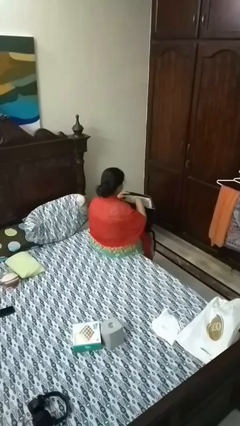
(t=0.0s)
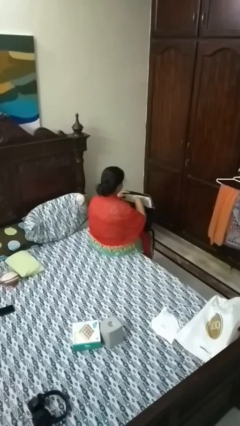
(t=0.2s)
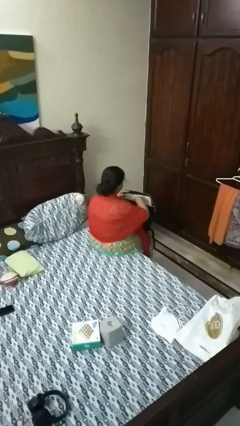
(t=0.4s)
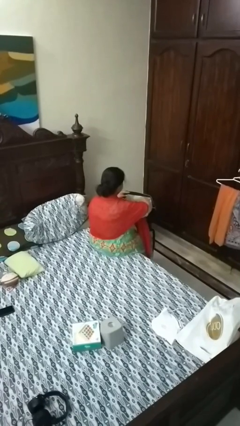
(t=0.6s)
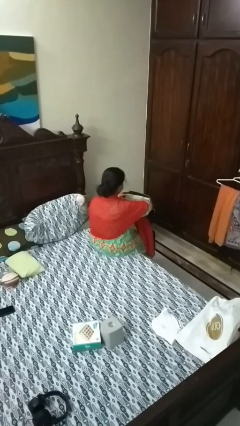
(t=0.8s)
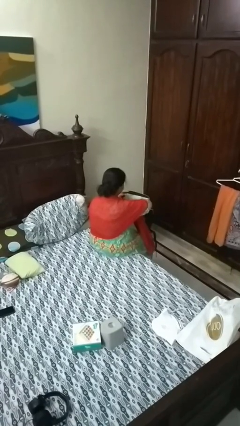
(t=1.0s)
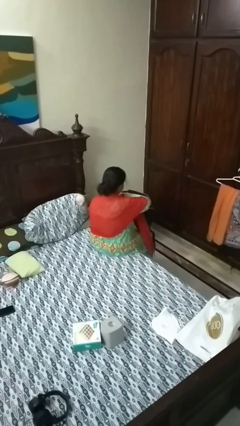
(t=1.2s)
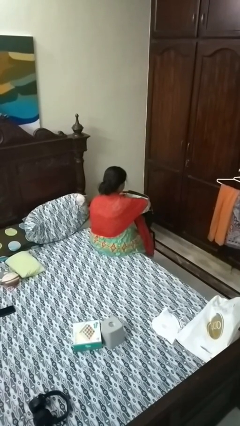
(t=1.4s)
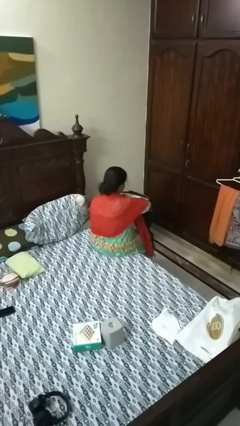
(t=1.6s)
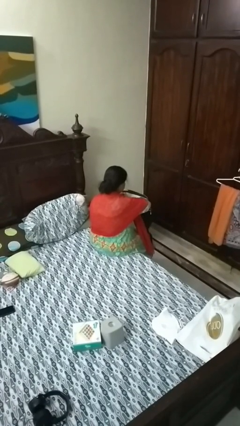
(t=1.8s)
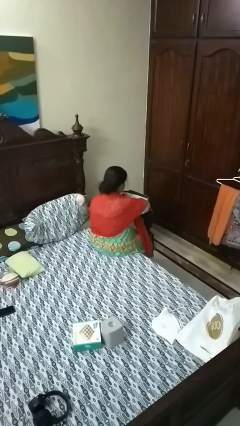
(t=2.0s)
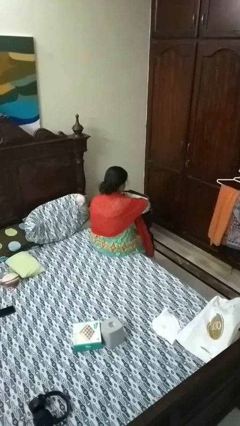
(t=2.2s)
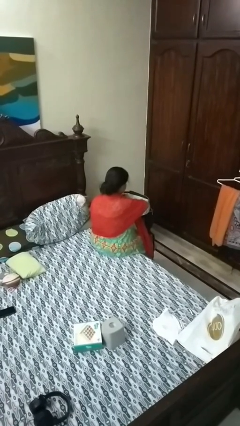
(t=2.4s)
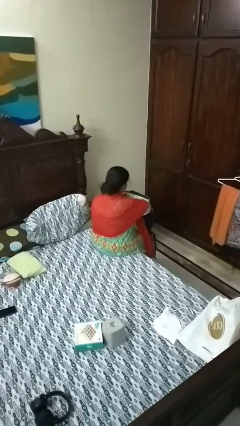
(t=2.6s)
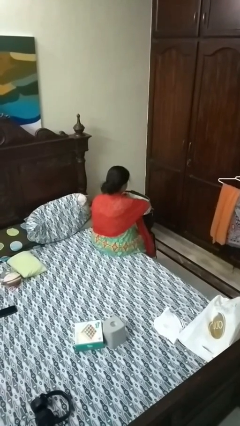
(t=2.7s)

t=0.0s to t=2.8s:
person searches in backpack

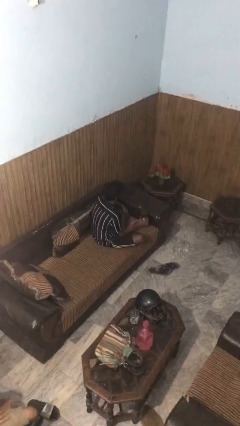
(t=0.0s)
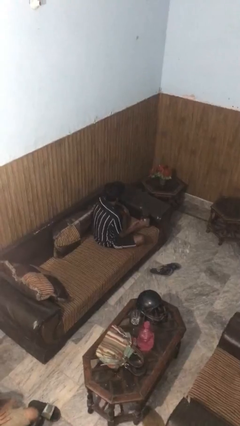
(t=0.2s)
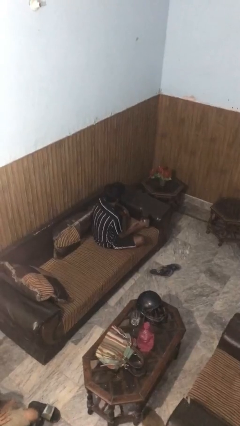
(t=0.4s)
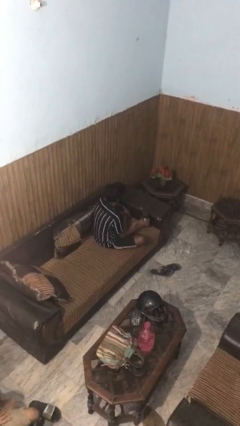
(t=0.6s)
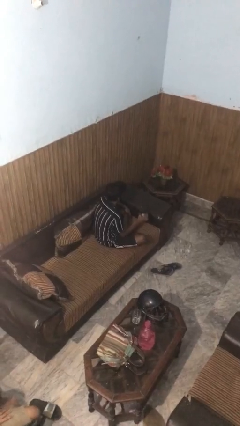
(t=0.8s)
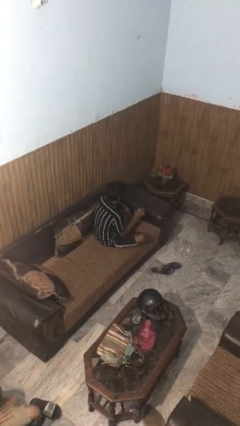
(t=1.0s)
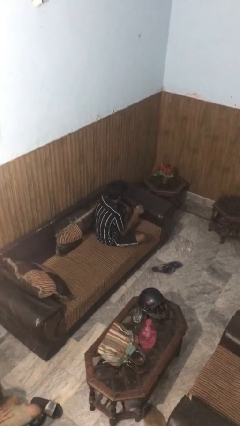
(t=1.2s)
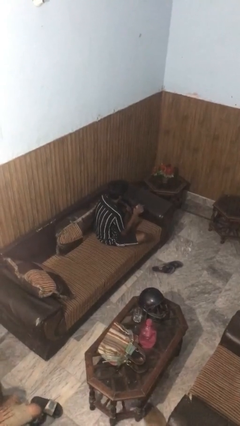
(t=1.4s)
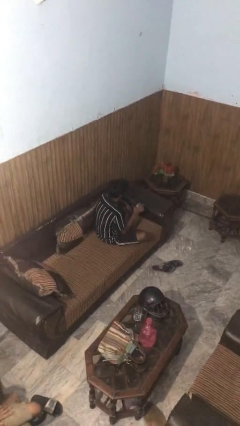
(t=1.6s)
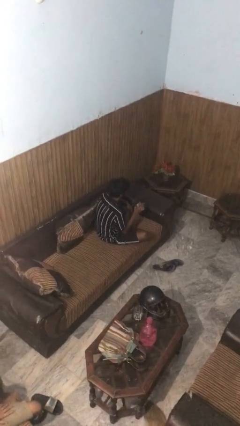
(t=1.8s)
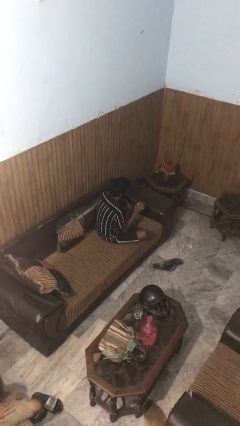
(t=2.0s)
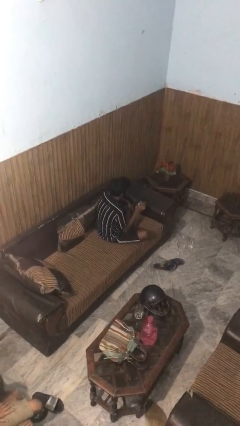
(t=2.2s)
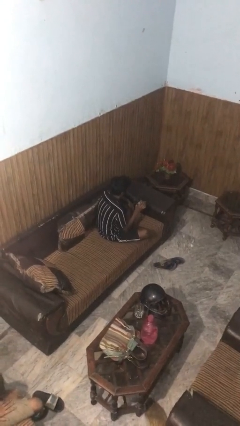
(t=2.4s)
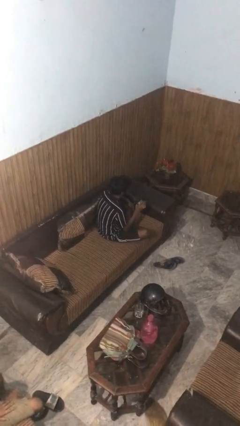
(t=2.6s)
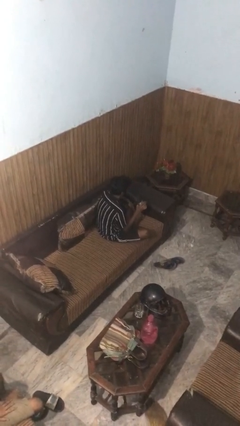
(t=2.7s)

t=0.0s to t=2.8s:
person drinks from straw

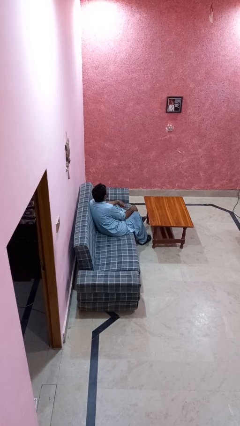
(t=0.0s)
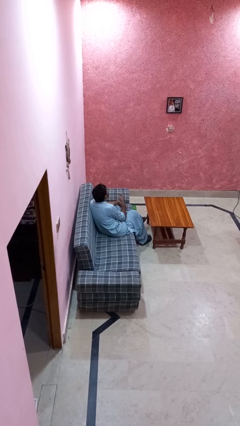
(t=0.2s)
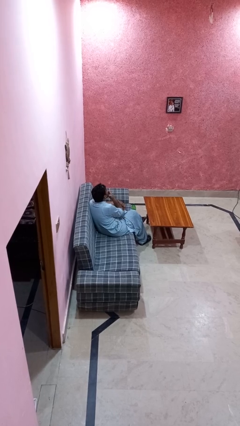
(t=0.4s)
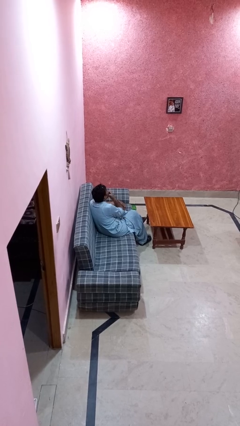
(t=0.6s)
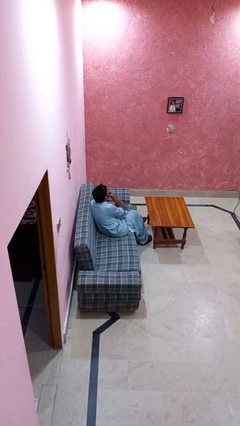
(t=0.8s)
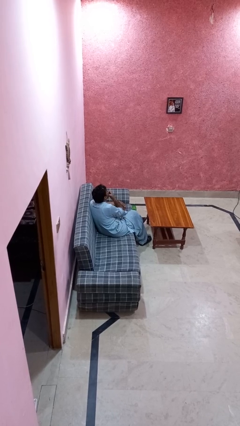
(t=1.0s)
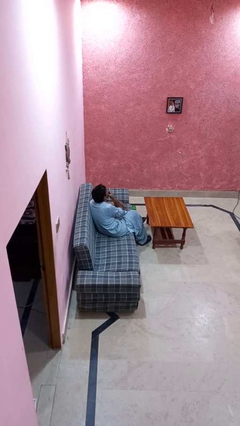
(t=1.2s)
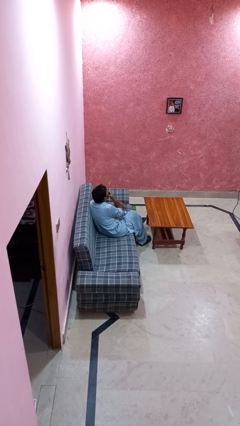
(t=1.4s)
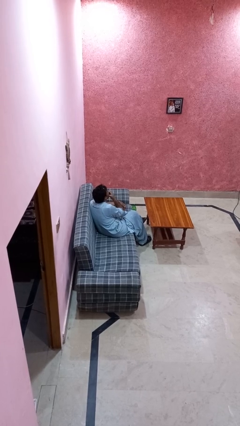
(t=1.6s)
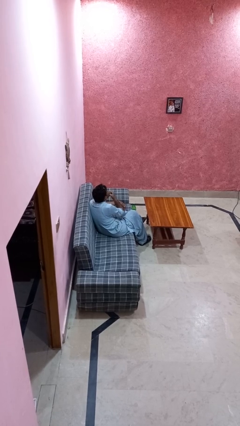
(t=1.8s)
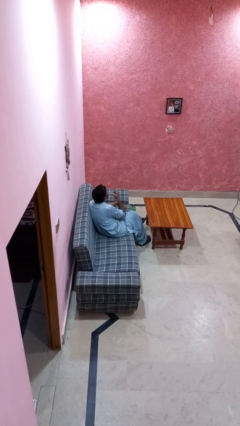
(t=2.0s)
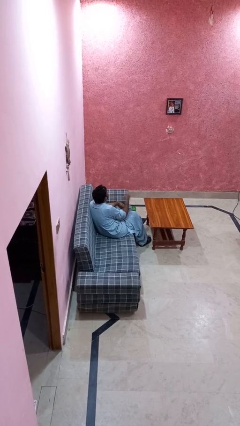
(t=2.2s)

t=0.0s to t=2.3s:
person strokes chin

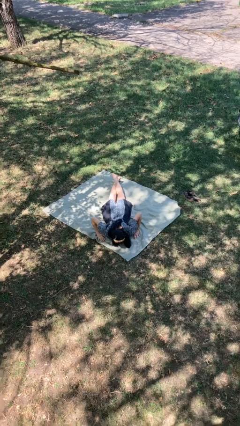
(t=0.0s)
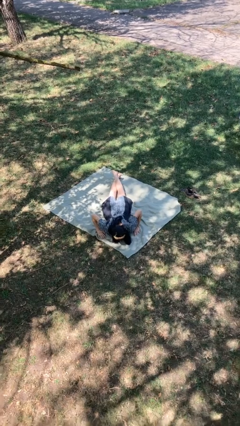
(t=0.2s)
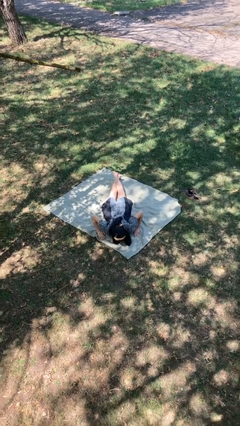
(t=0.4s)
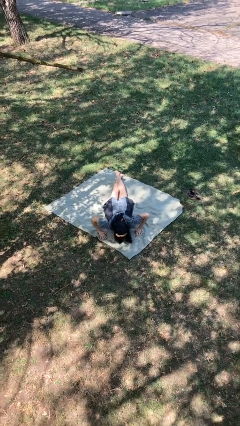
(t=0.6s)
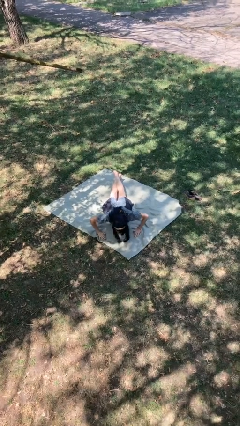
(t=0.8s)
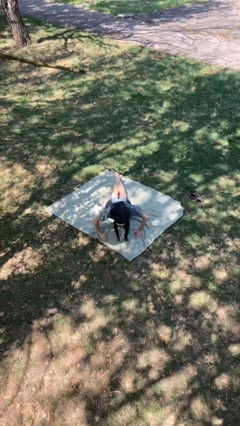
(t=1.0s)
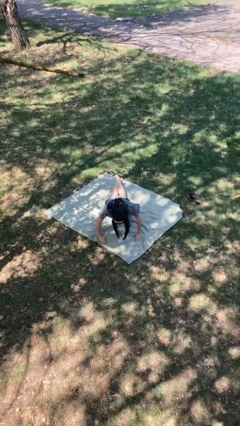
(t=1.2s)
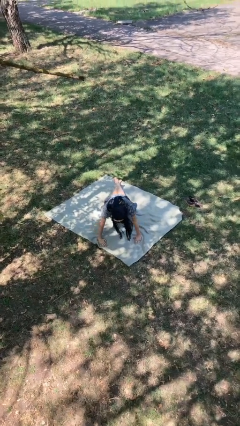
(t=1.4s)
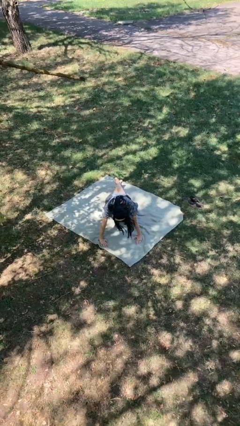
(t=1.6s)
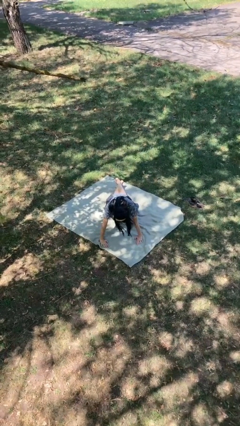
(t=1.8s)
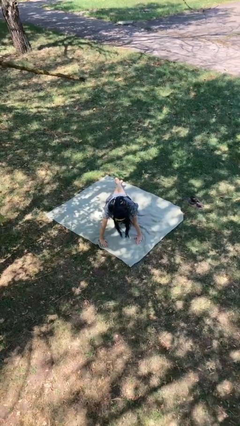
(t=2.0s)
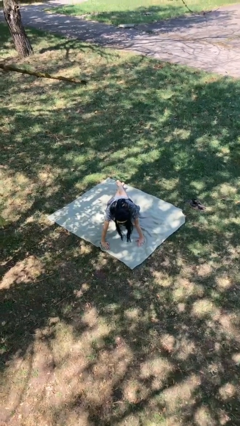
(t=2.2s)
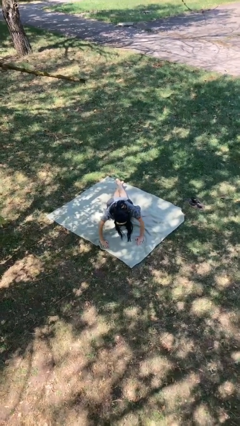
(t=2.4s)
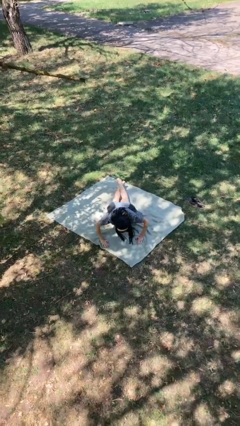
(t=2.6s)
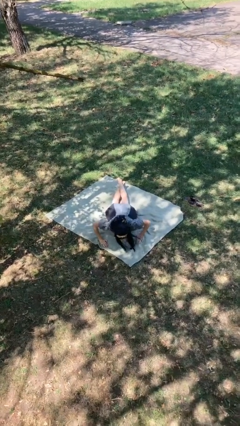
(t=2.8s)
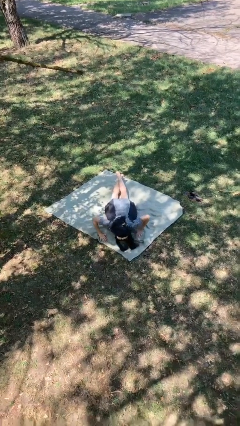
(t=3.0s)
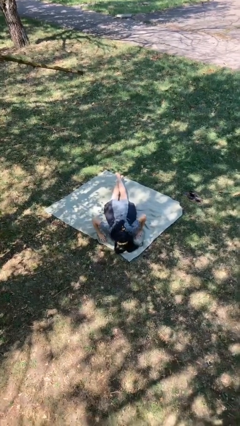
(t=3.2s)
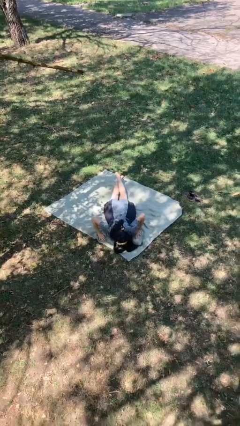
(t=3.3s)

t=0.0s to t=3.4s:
person exercises with pushup

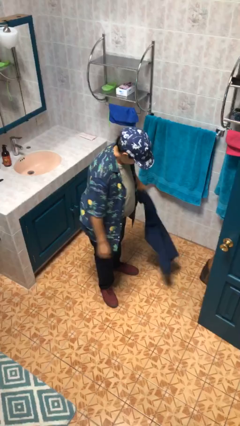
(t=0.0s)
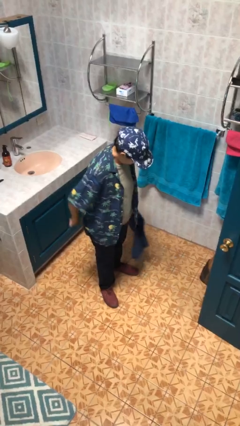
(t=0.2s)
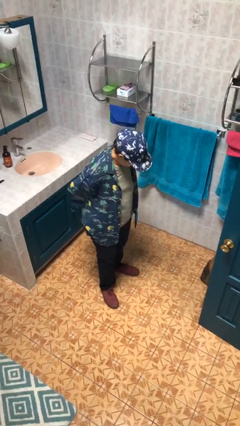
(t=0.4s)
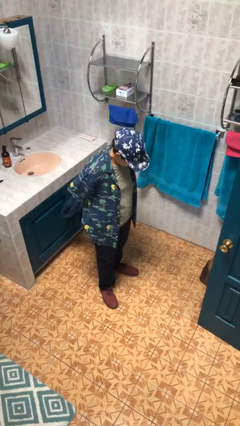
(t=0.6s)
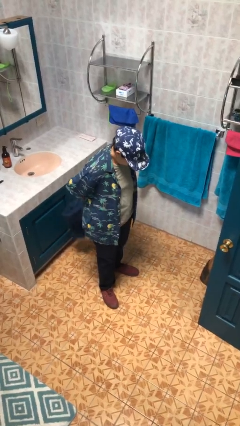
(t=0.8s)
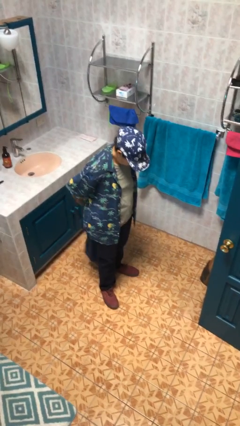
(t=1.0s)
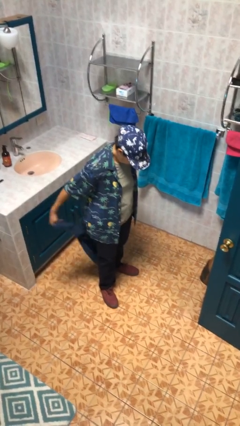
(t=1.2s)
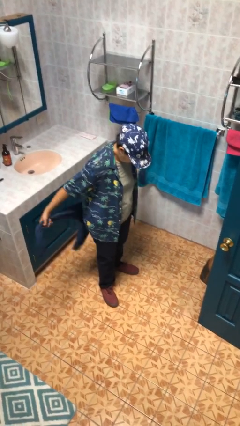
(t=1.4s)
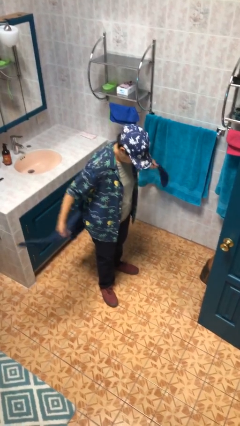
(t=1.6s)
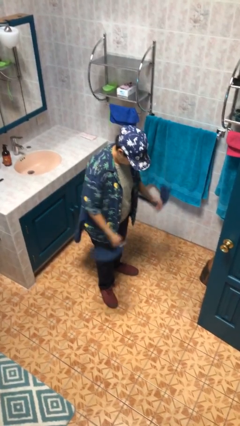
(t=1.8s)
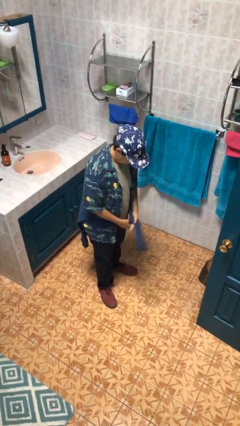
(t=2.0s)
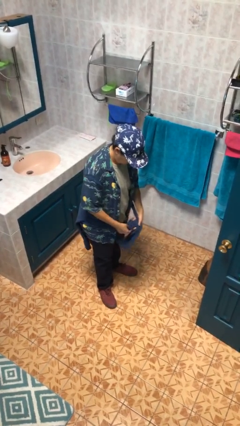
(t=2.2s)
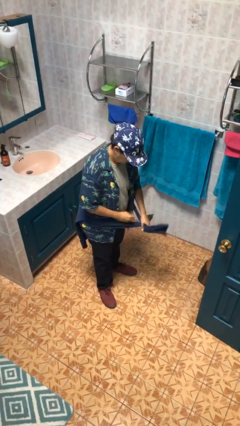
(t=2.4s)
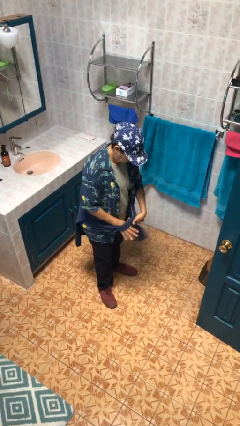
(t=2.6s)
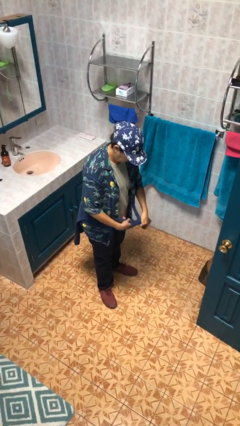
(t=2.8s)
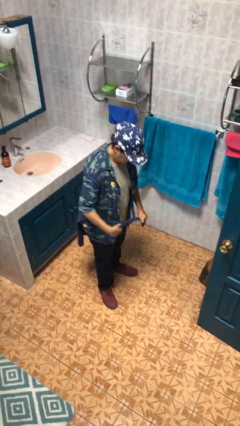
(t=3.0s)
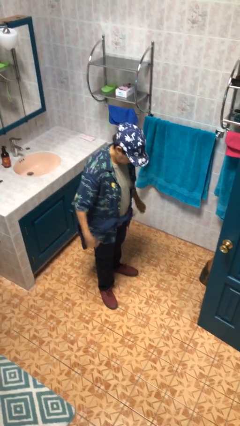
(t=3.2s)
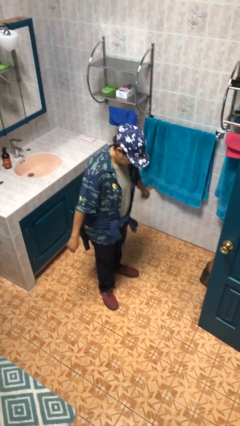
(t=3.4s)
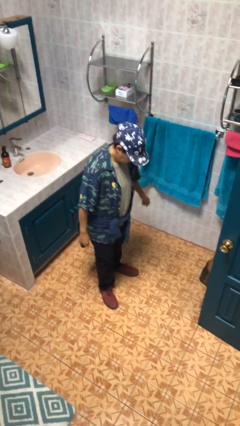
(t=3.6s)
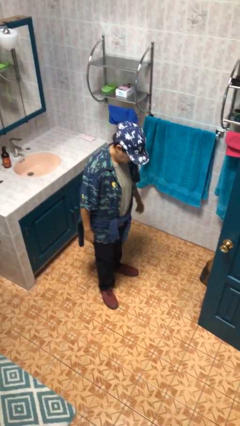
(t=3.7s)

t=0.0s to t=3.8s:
person ties jacket around waist

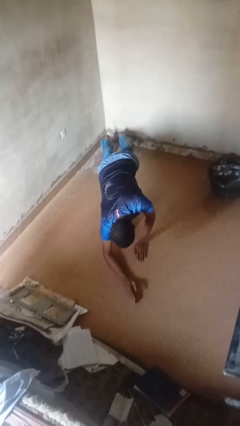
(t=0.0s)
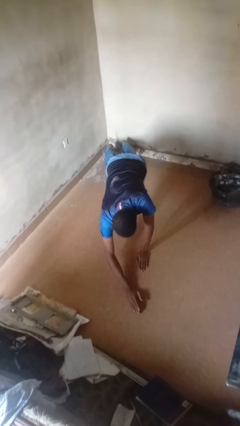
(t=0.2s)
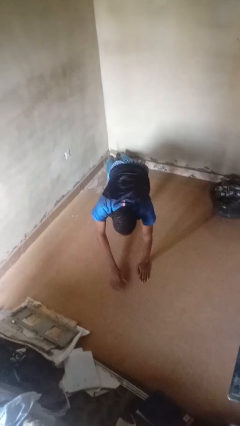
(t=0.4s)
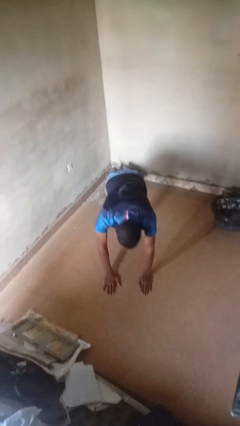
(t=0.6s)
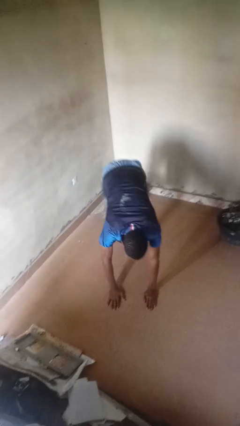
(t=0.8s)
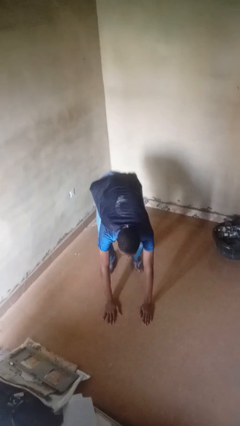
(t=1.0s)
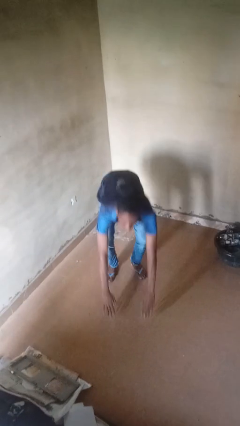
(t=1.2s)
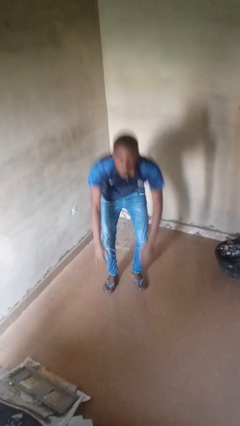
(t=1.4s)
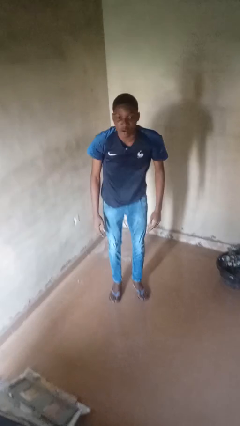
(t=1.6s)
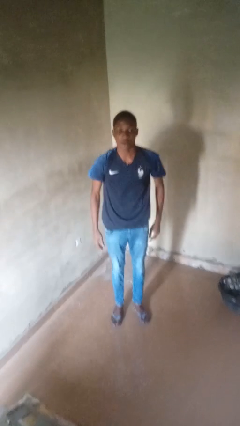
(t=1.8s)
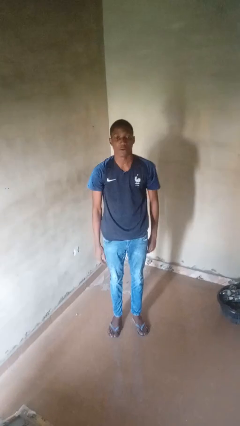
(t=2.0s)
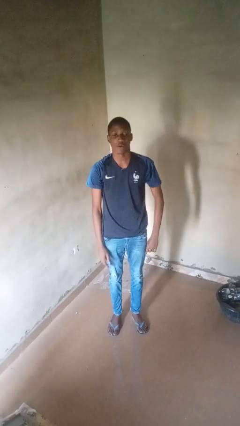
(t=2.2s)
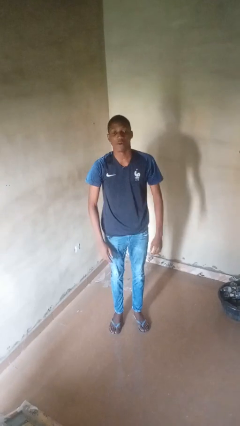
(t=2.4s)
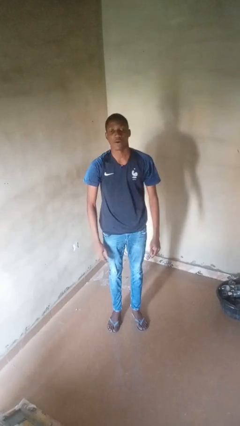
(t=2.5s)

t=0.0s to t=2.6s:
person stands up from floor
